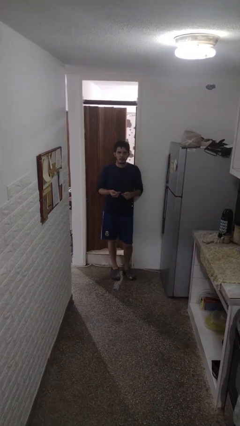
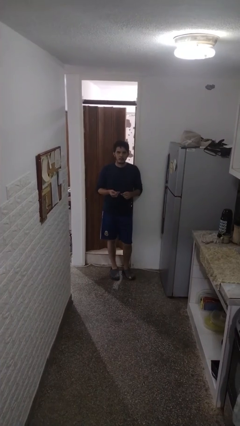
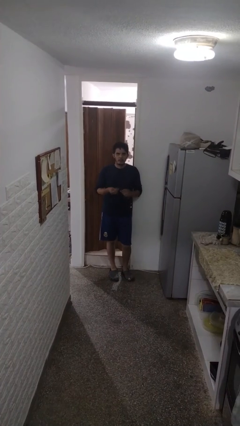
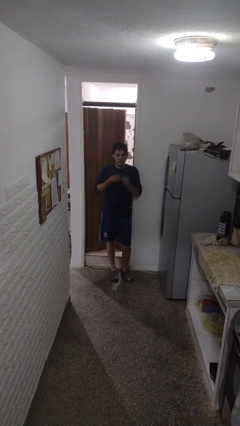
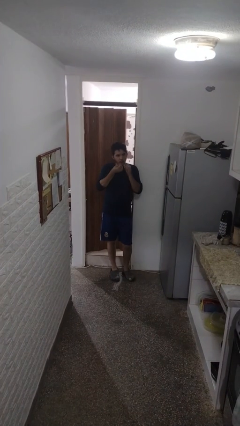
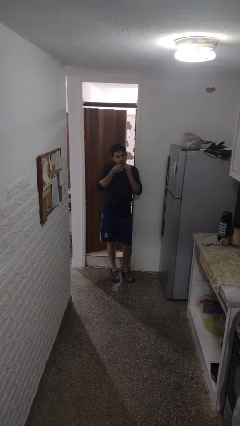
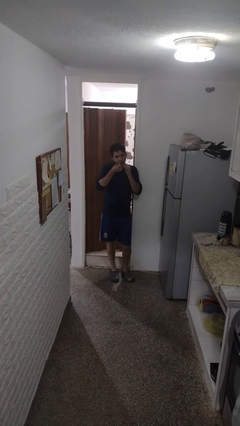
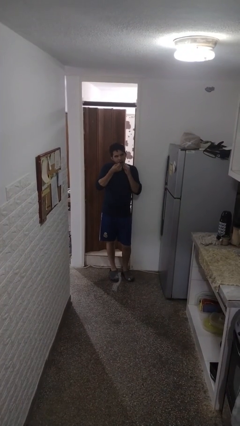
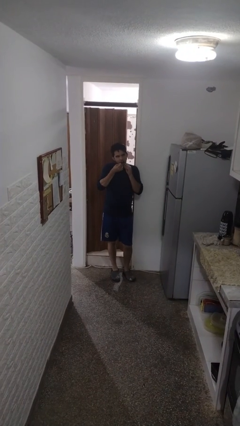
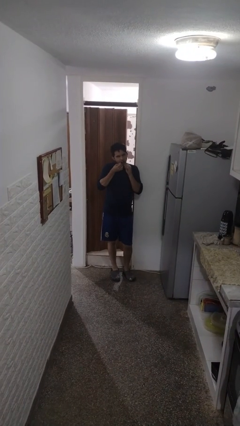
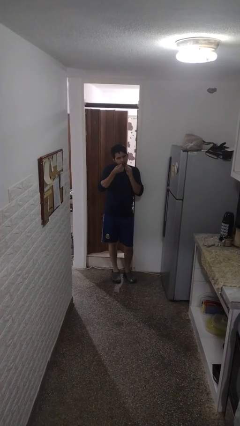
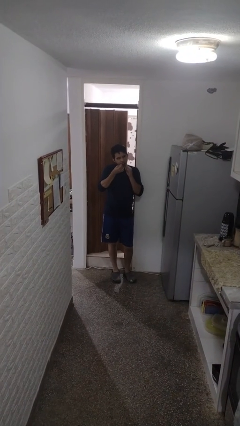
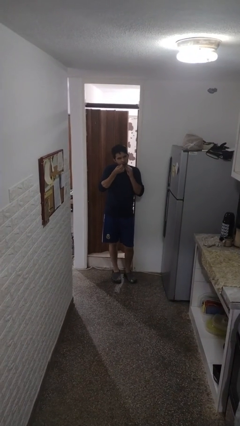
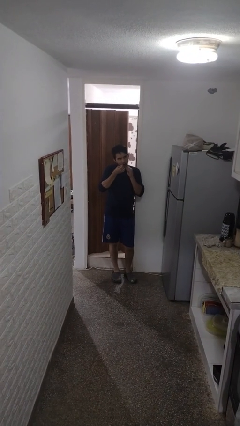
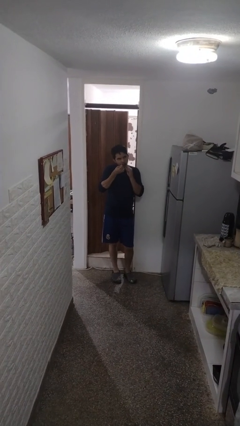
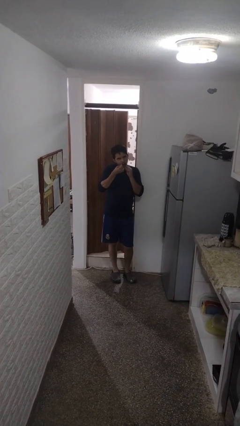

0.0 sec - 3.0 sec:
person flosses

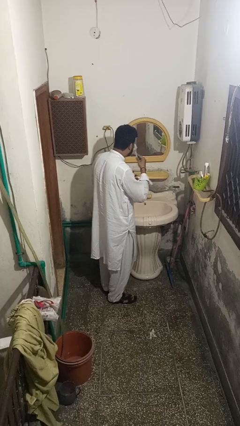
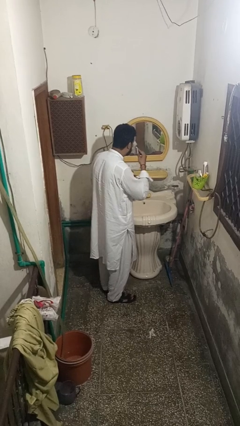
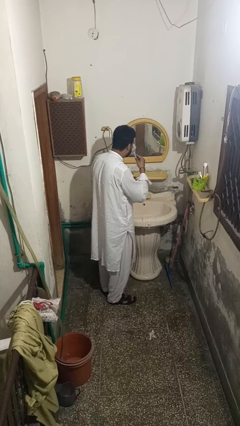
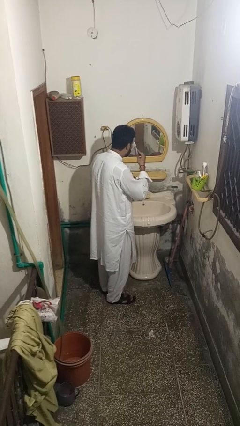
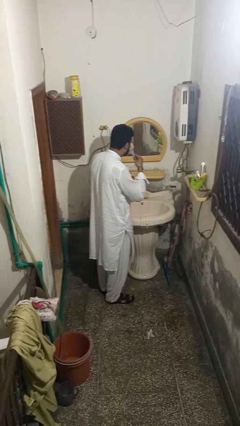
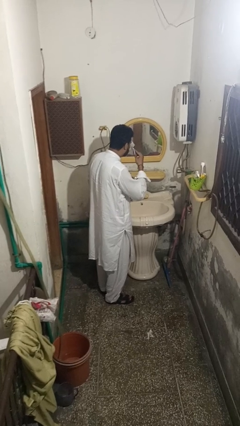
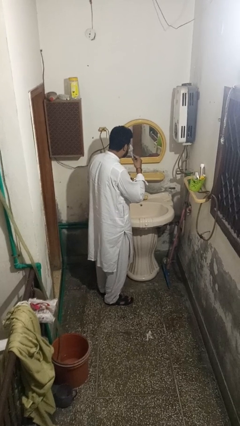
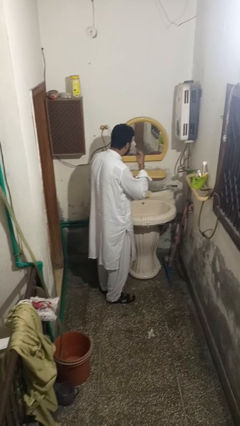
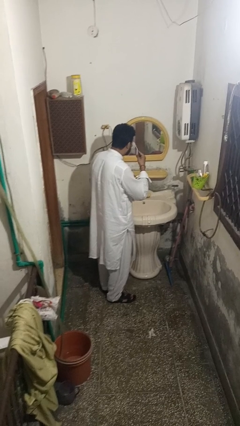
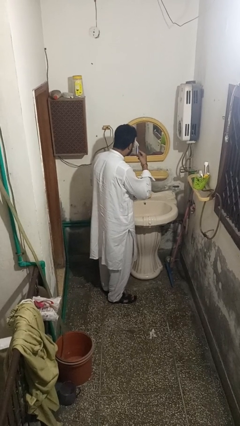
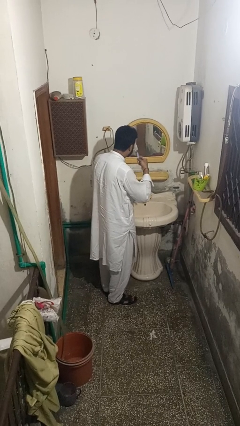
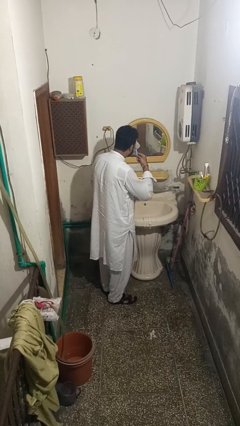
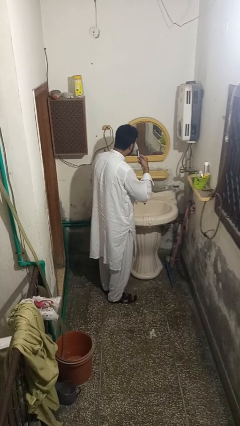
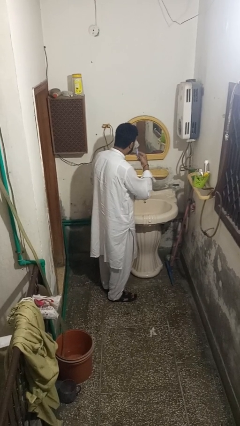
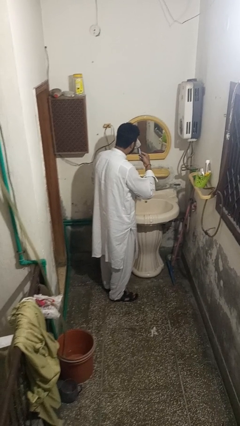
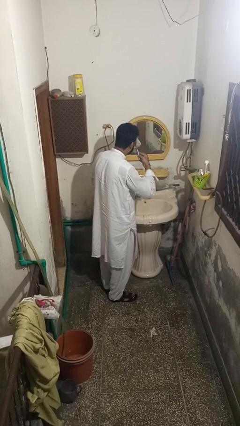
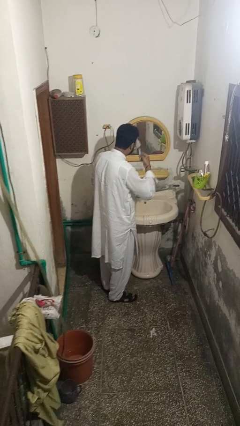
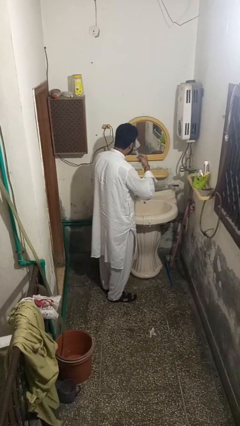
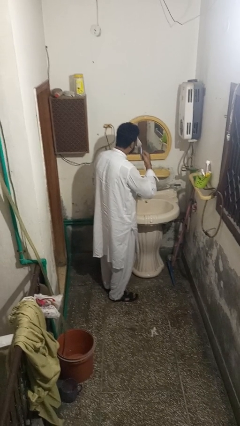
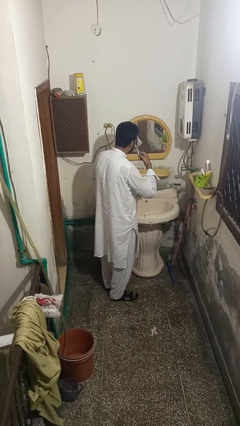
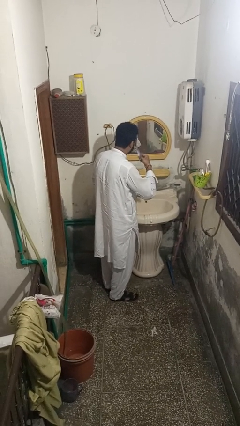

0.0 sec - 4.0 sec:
person shaves face

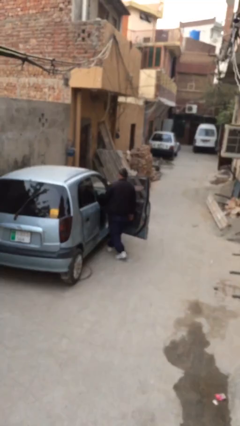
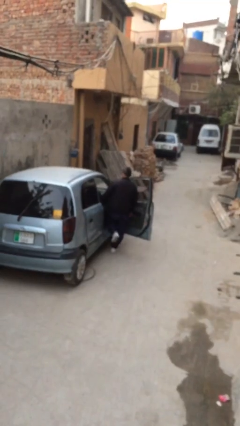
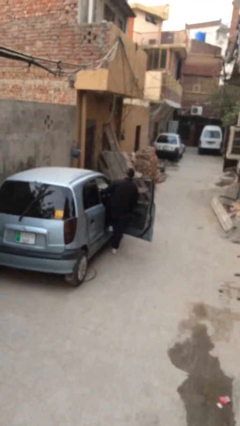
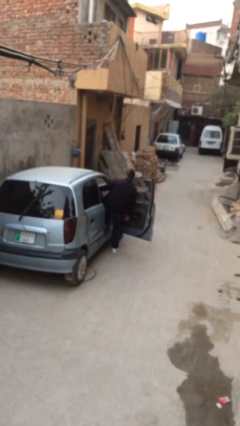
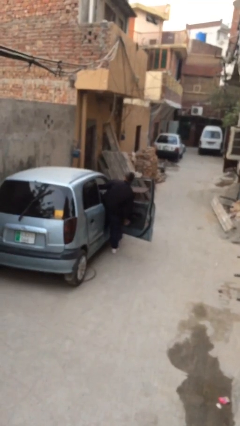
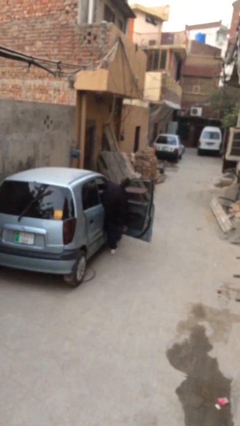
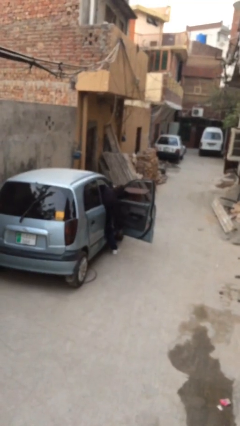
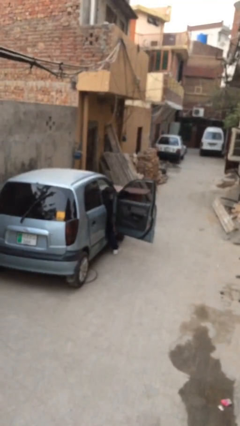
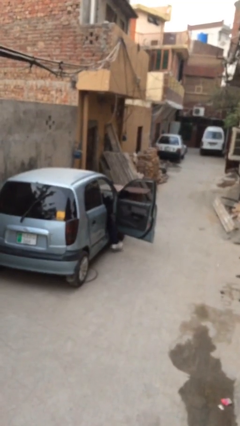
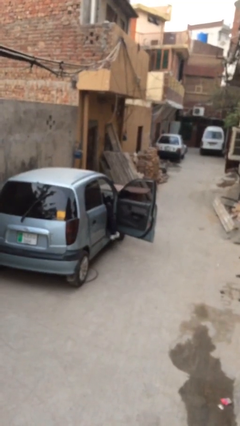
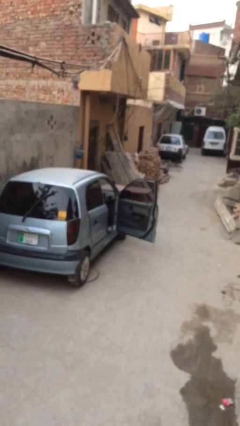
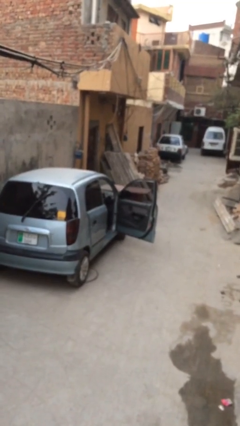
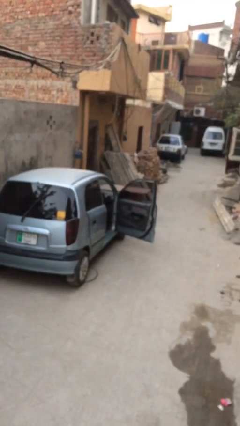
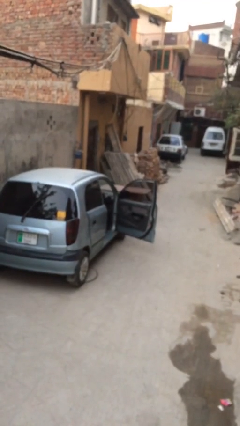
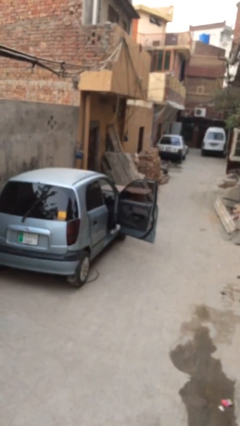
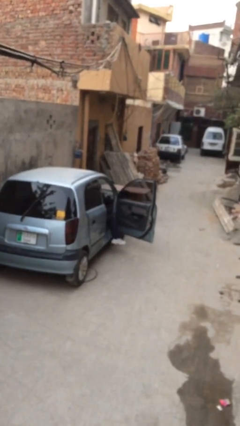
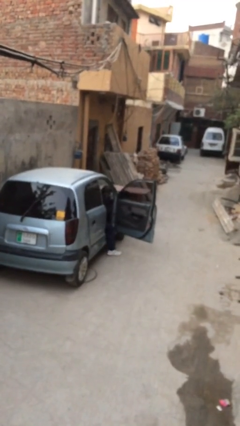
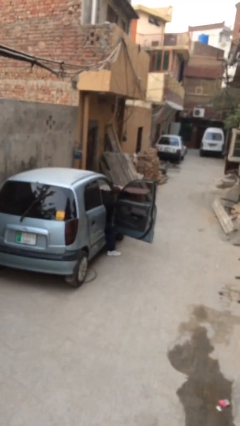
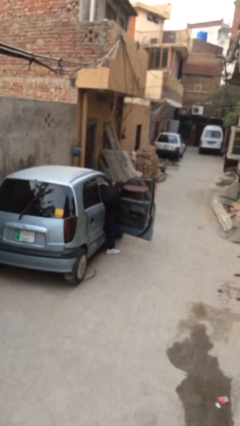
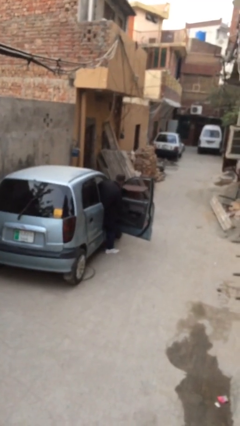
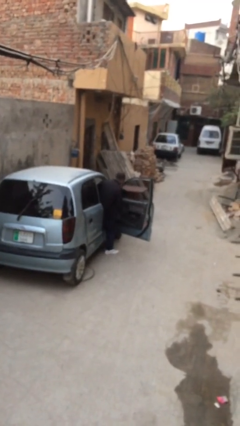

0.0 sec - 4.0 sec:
person enters car

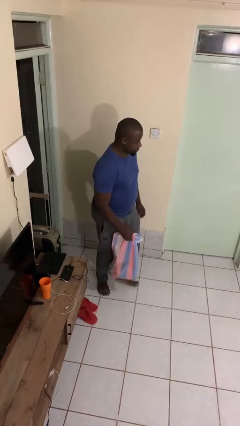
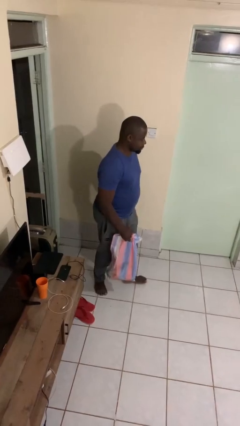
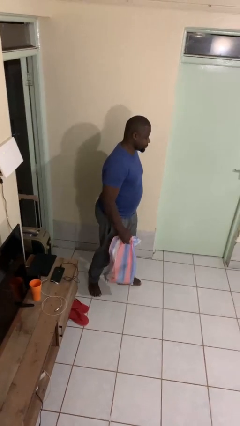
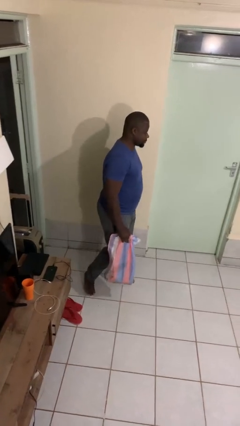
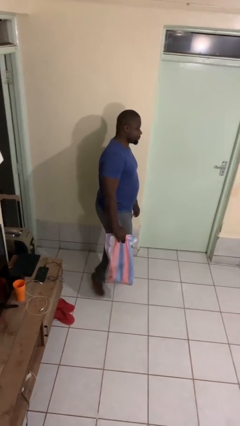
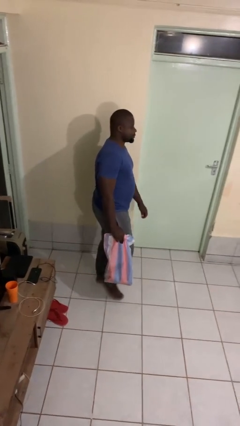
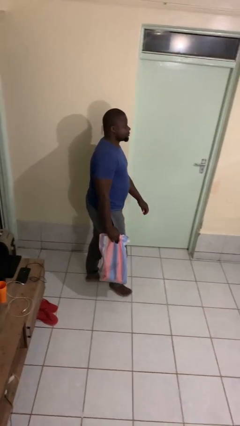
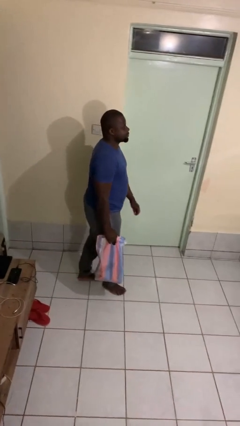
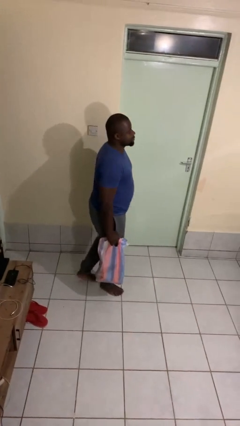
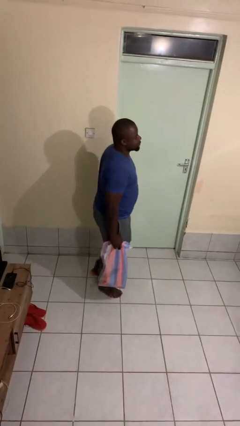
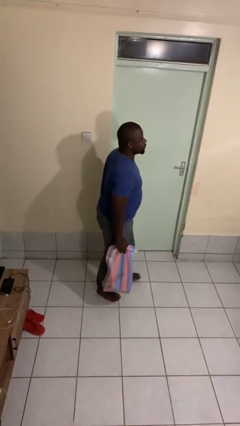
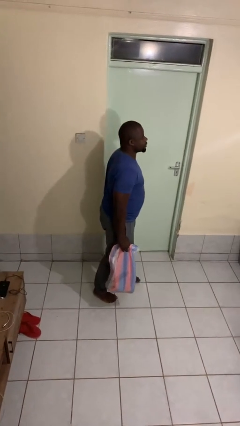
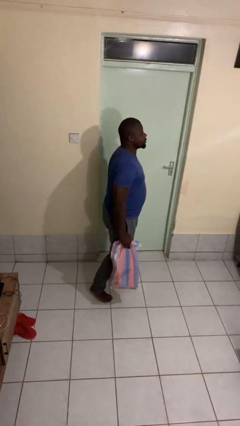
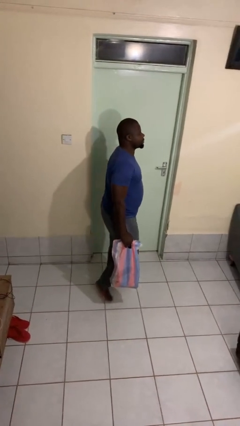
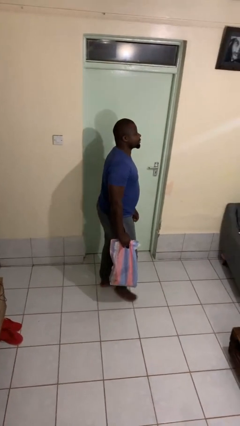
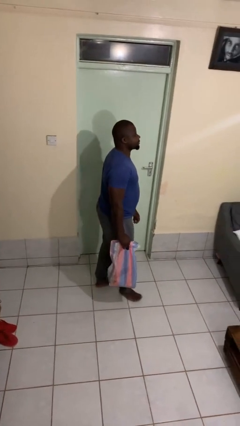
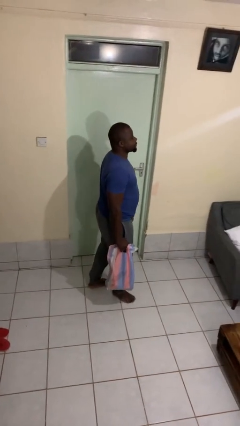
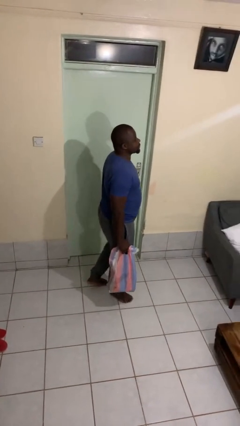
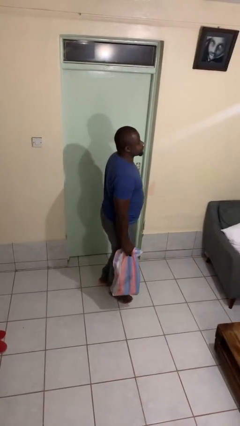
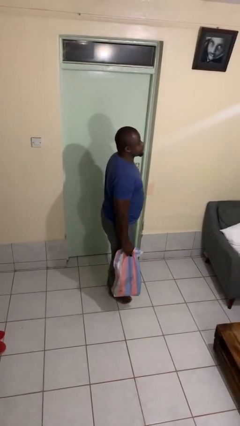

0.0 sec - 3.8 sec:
person carries groceries

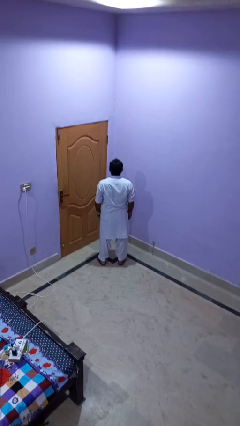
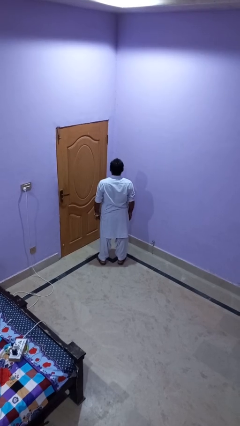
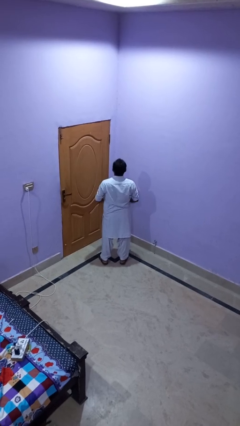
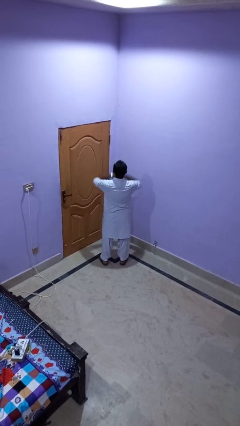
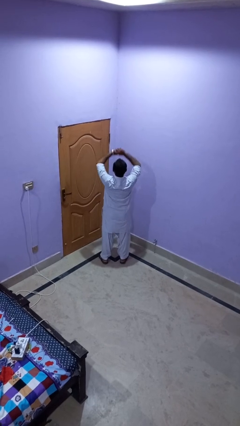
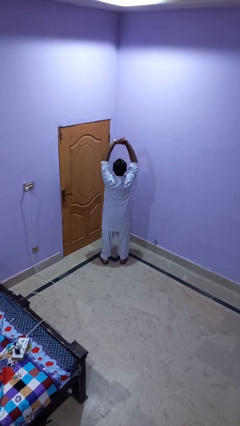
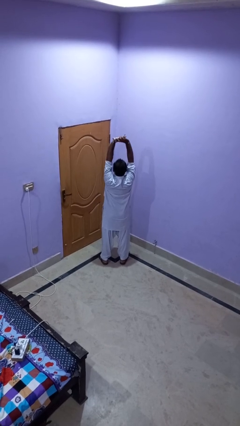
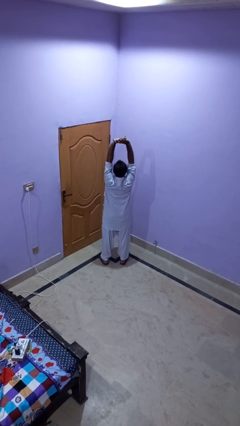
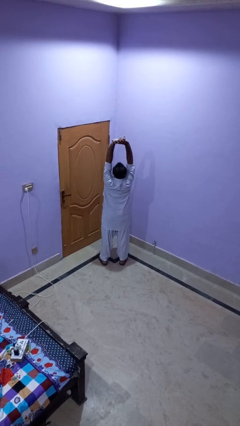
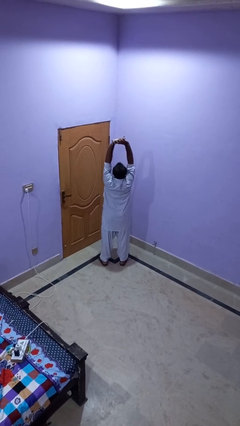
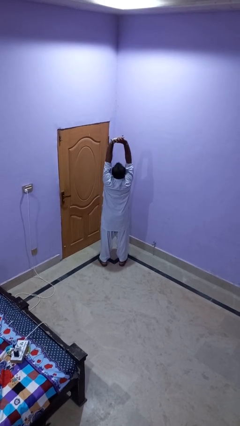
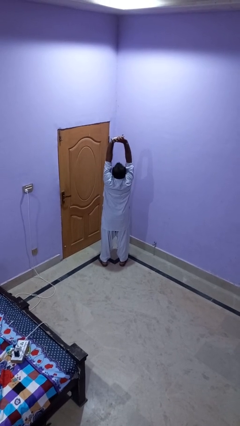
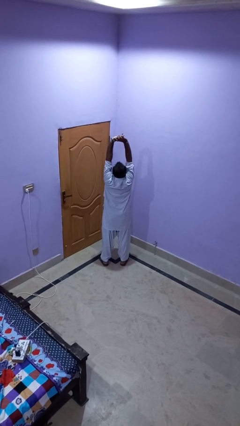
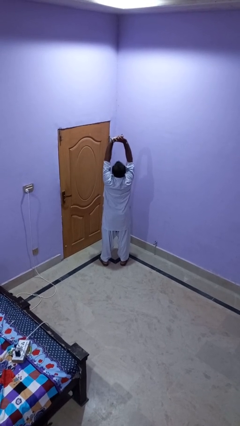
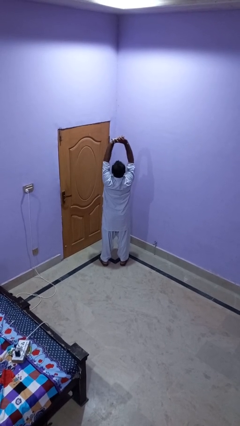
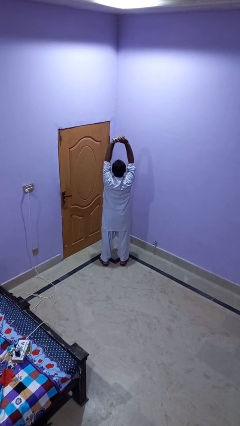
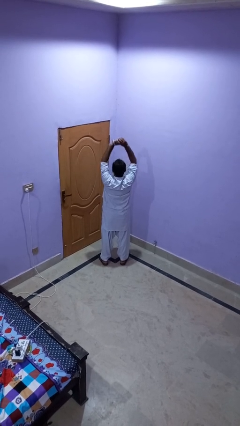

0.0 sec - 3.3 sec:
person stretches arms over head
